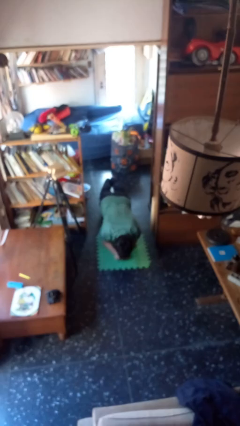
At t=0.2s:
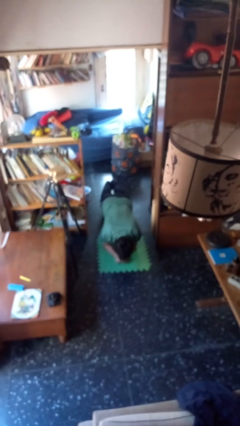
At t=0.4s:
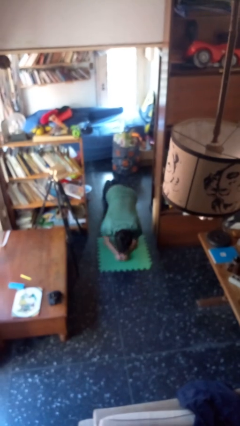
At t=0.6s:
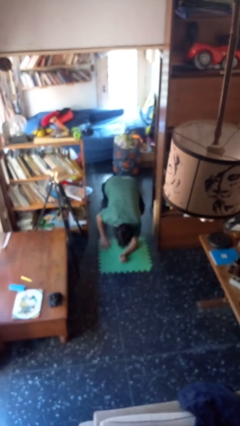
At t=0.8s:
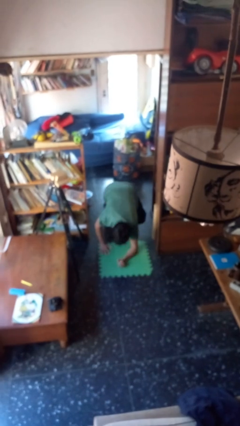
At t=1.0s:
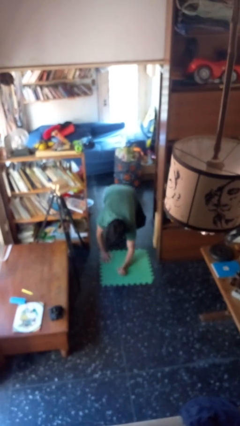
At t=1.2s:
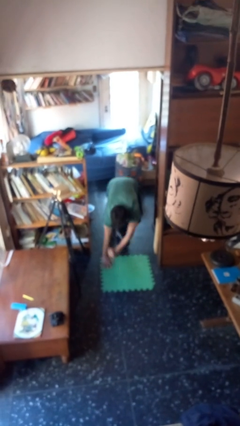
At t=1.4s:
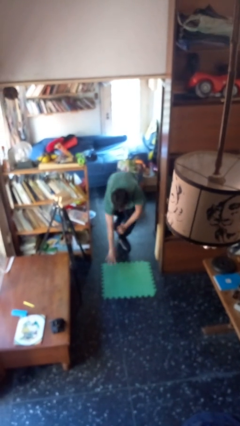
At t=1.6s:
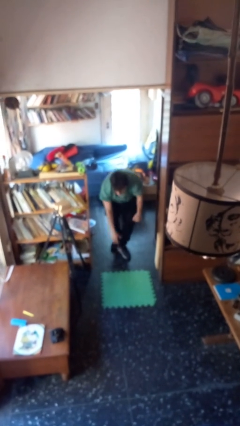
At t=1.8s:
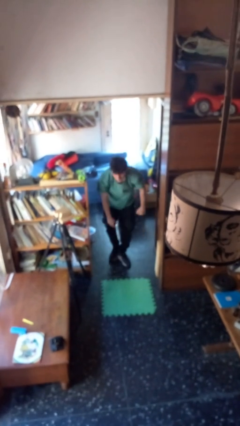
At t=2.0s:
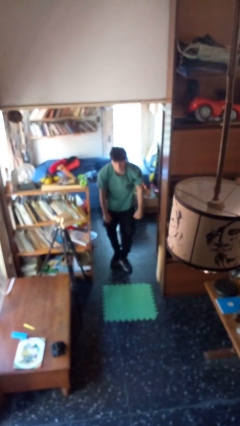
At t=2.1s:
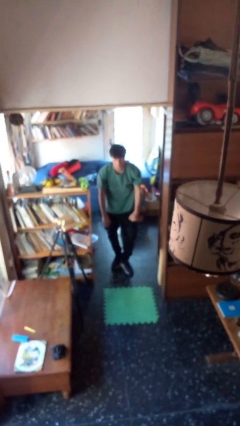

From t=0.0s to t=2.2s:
person stands up from floor

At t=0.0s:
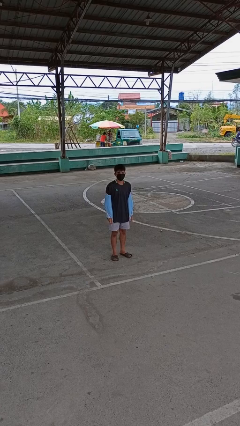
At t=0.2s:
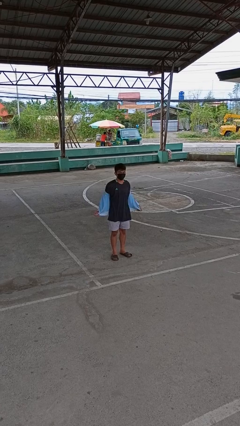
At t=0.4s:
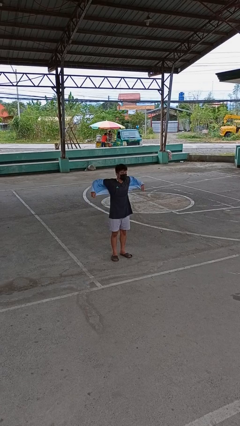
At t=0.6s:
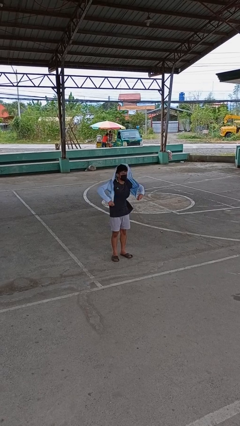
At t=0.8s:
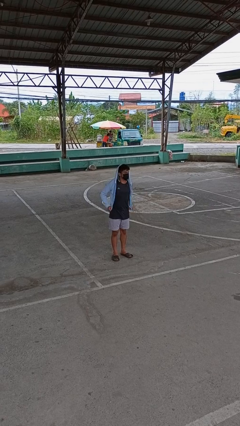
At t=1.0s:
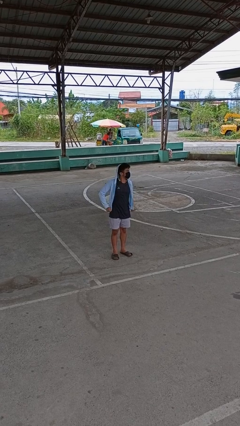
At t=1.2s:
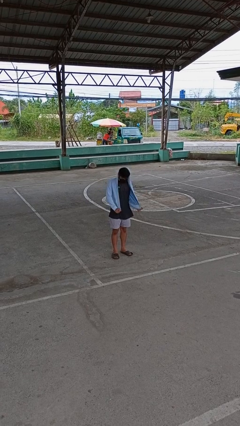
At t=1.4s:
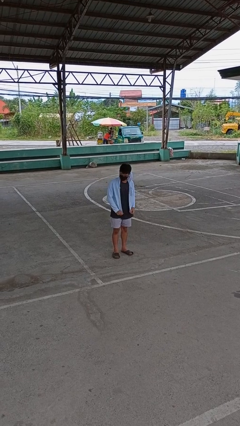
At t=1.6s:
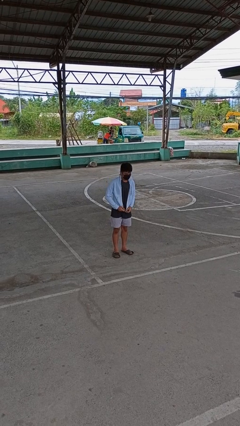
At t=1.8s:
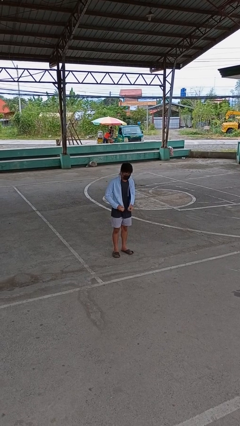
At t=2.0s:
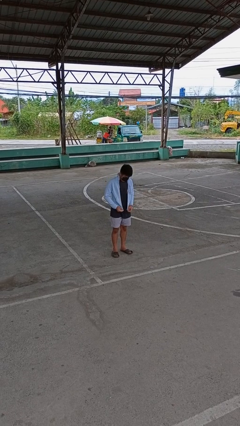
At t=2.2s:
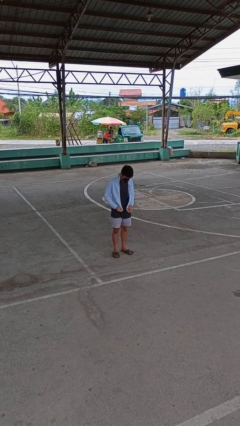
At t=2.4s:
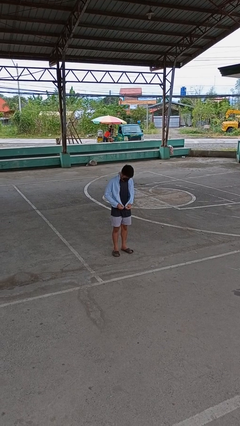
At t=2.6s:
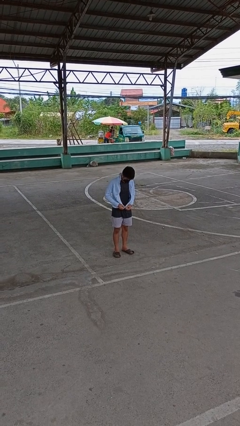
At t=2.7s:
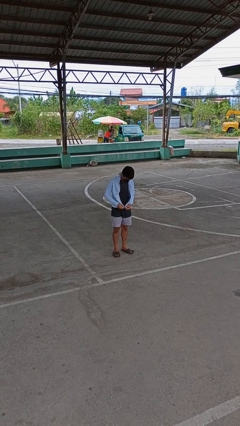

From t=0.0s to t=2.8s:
person puts on jacket

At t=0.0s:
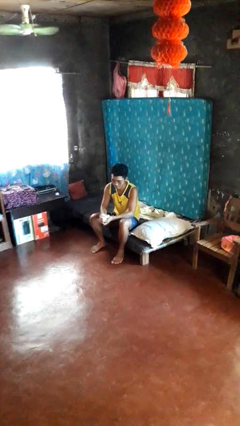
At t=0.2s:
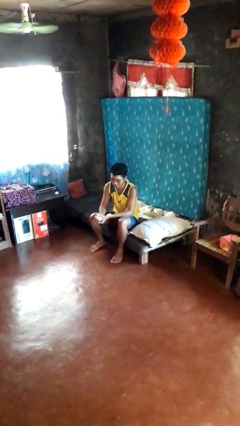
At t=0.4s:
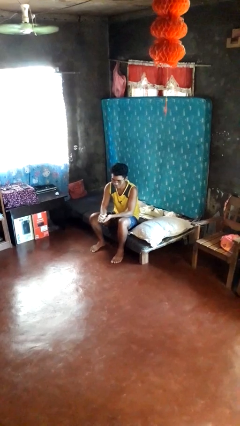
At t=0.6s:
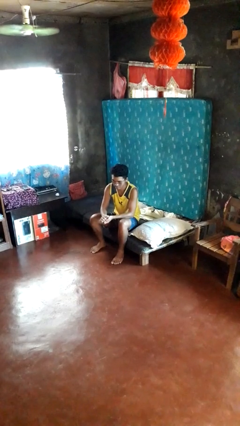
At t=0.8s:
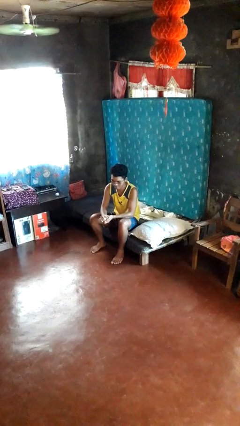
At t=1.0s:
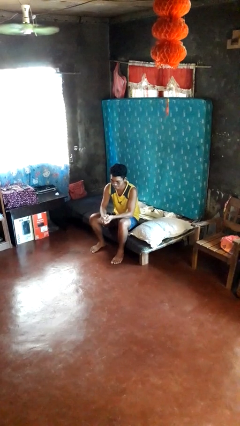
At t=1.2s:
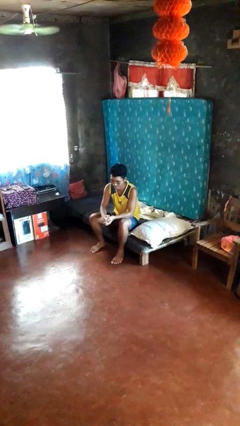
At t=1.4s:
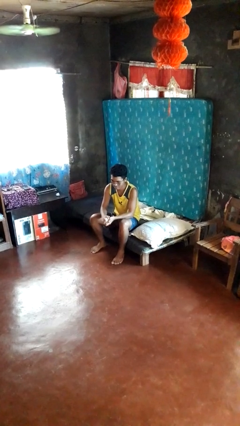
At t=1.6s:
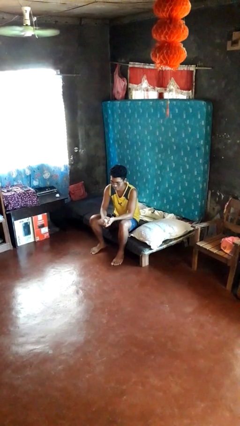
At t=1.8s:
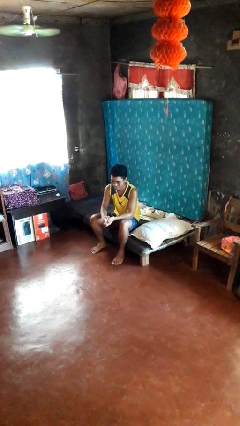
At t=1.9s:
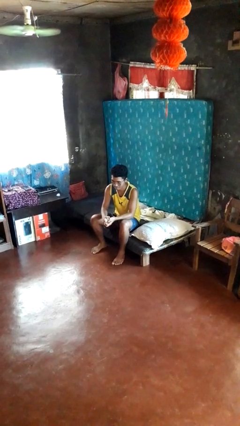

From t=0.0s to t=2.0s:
person crumples paper

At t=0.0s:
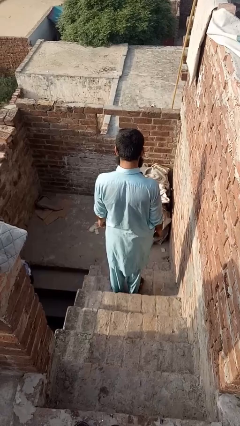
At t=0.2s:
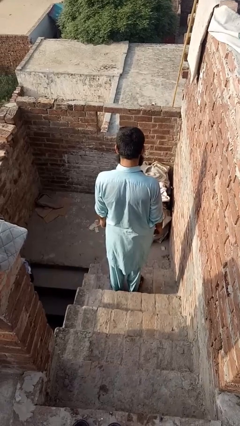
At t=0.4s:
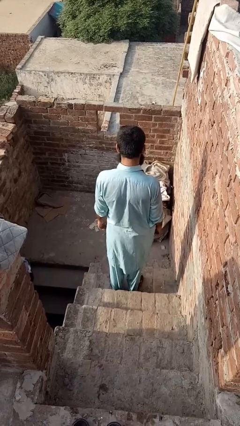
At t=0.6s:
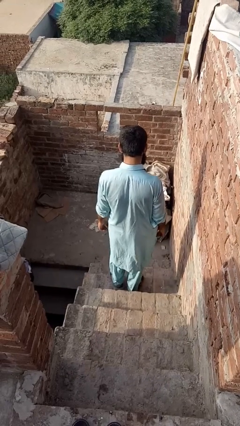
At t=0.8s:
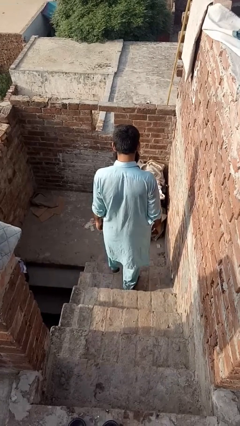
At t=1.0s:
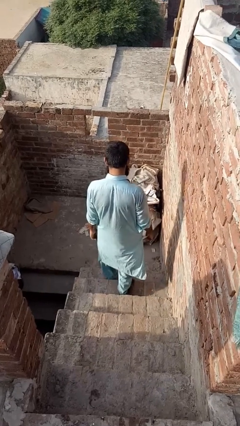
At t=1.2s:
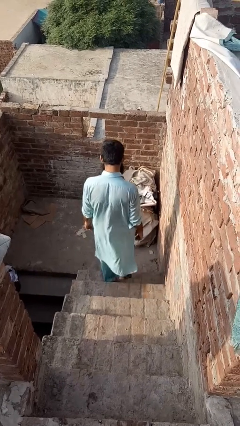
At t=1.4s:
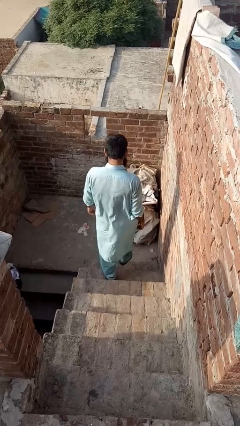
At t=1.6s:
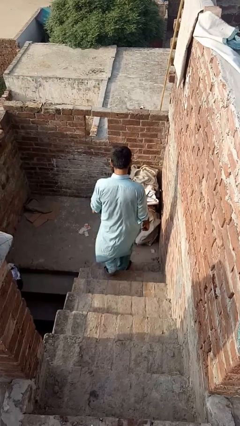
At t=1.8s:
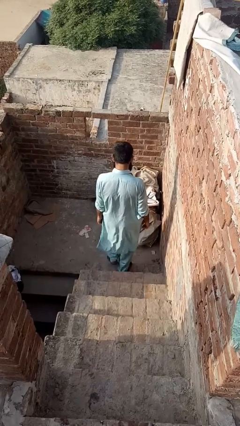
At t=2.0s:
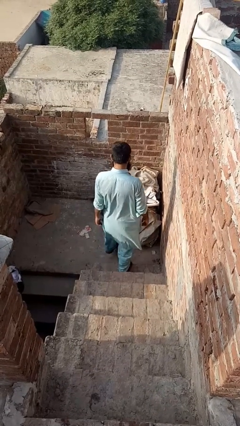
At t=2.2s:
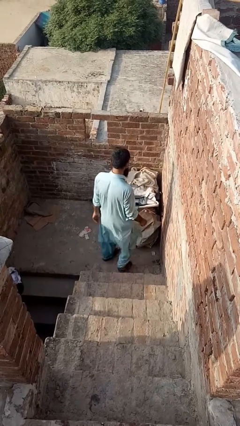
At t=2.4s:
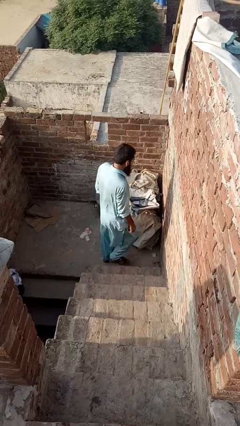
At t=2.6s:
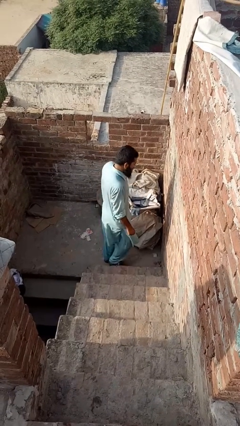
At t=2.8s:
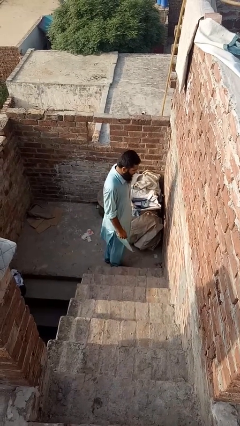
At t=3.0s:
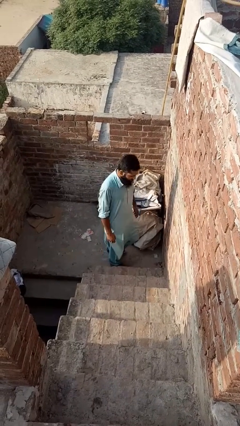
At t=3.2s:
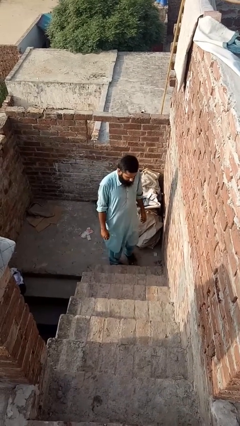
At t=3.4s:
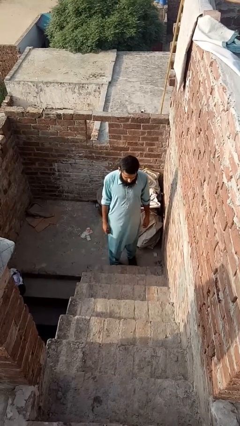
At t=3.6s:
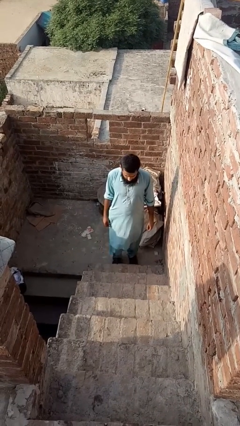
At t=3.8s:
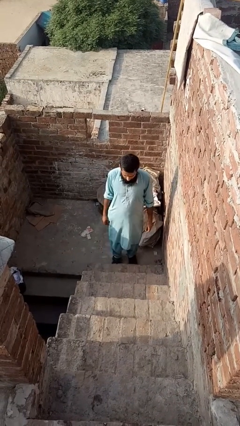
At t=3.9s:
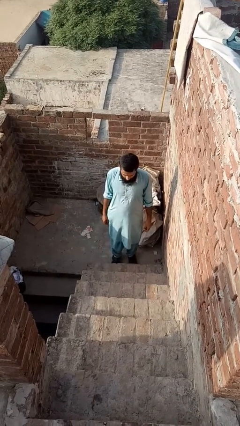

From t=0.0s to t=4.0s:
person climbs down ladder

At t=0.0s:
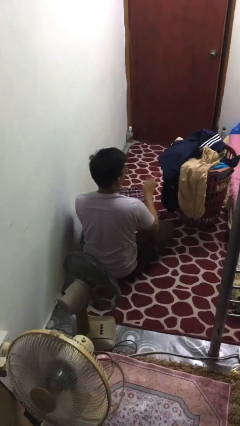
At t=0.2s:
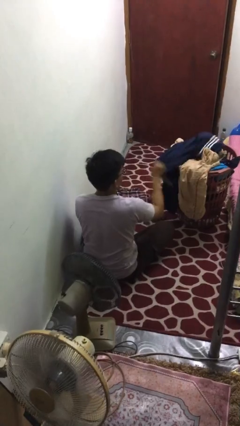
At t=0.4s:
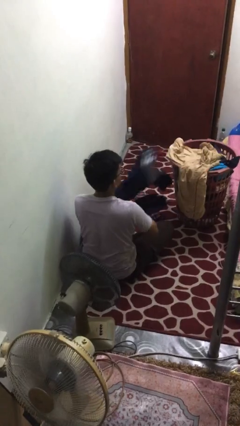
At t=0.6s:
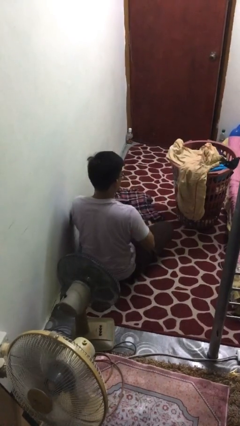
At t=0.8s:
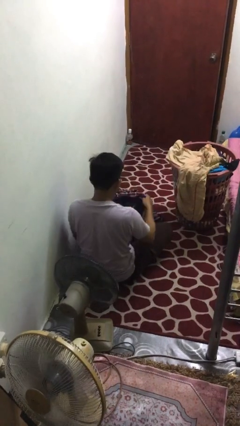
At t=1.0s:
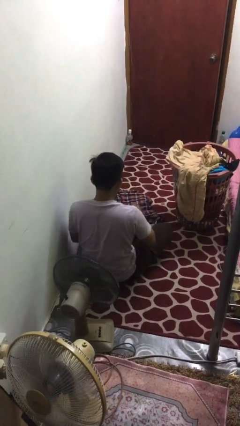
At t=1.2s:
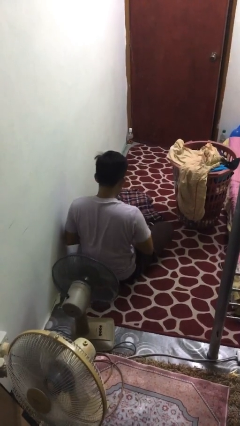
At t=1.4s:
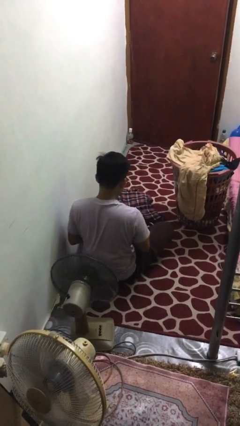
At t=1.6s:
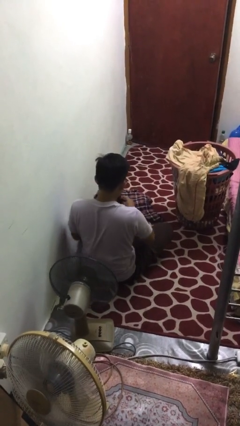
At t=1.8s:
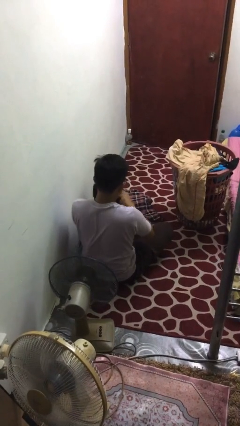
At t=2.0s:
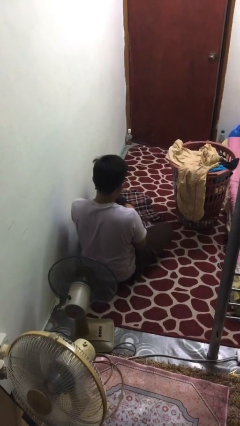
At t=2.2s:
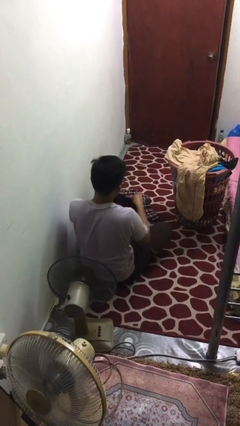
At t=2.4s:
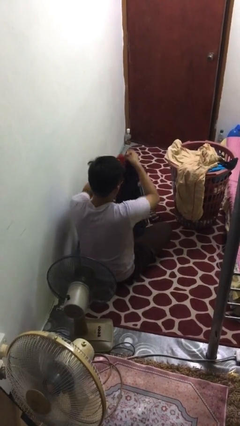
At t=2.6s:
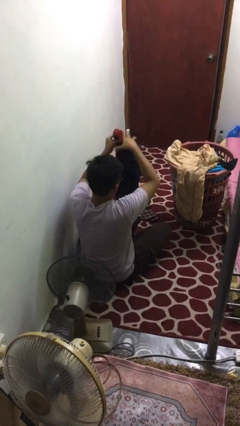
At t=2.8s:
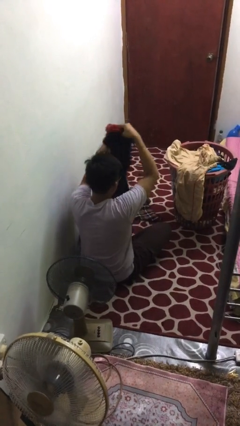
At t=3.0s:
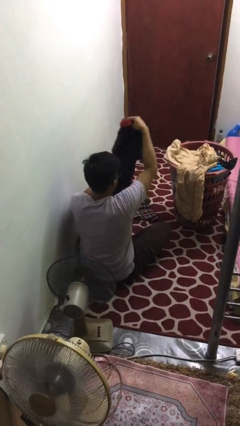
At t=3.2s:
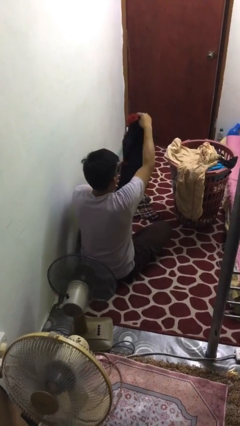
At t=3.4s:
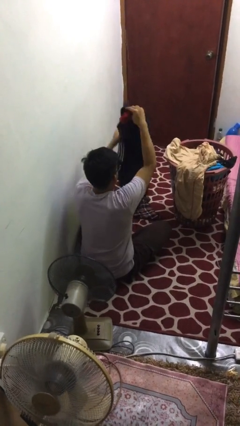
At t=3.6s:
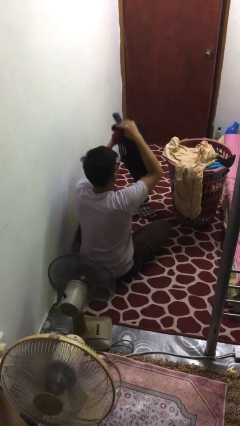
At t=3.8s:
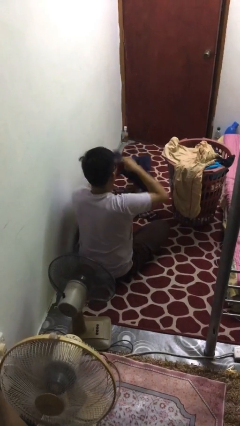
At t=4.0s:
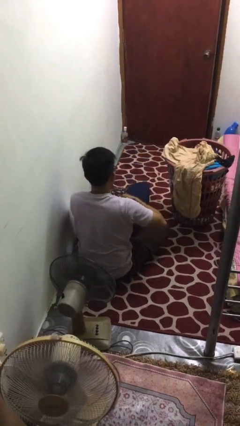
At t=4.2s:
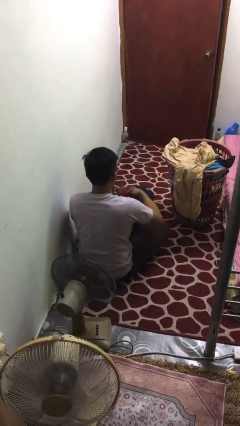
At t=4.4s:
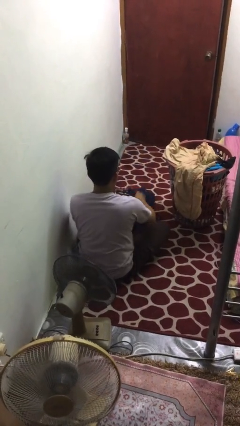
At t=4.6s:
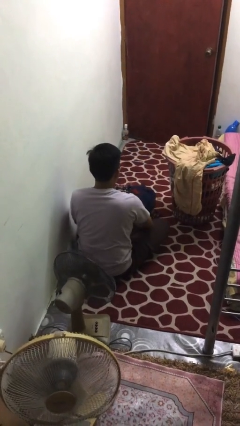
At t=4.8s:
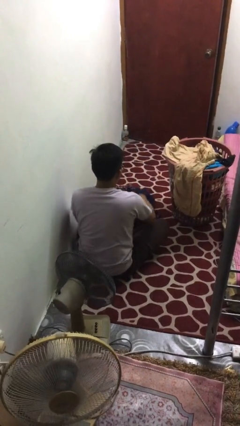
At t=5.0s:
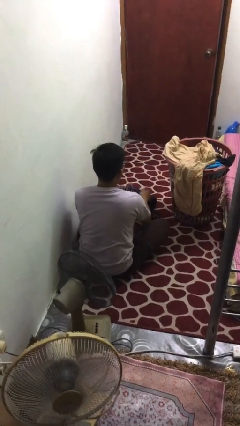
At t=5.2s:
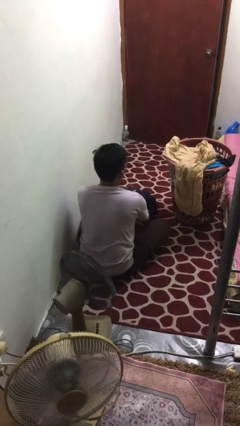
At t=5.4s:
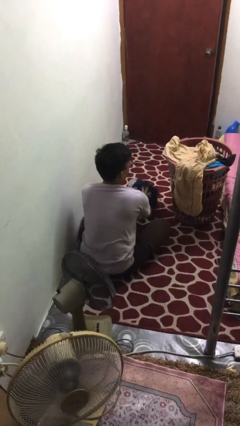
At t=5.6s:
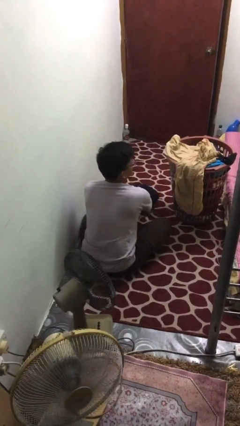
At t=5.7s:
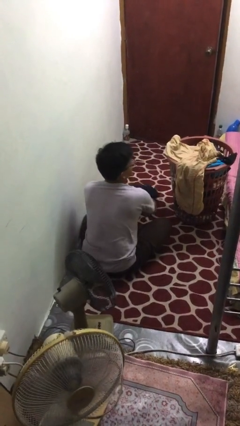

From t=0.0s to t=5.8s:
person folds pants

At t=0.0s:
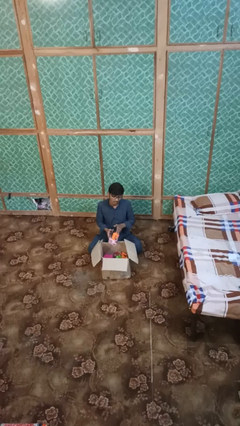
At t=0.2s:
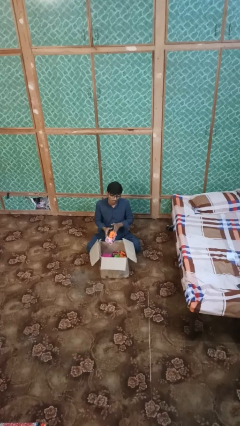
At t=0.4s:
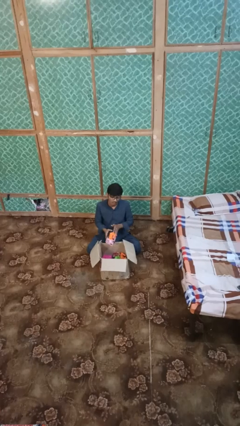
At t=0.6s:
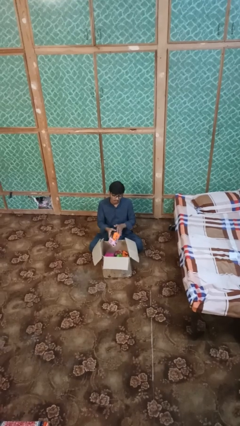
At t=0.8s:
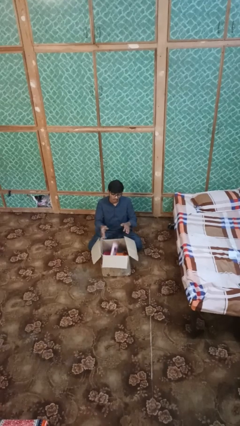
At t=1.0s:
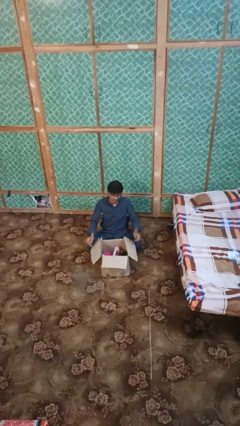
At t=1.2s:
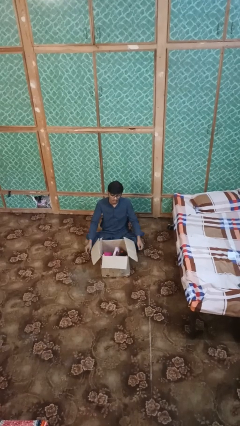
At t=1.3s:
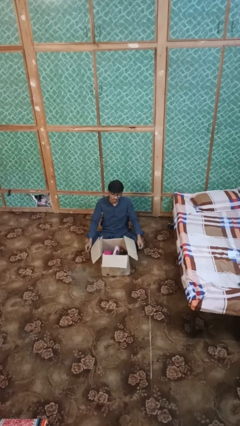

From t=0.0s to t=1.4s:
person puts object into box
